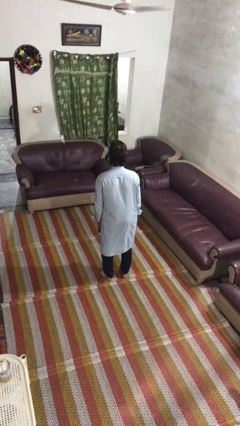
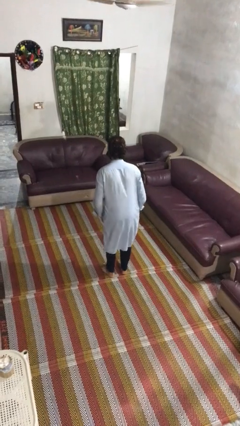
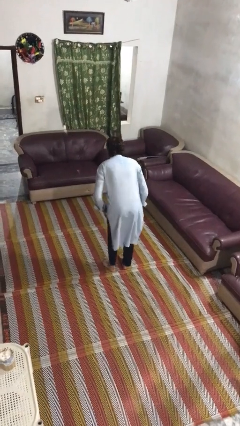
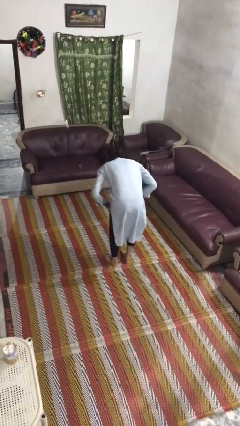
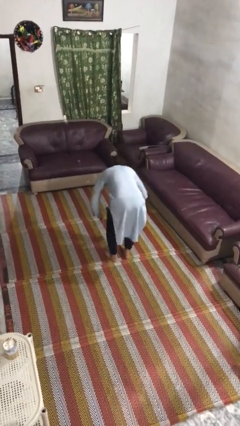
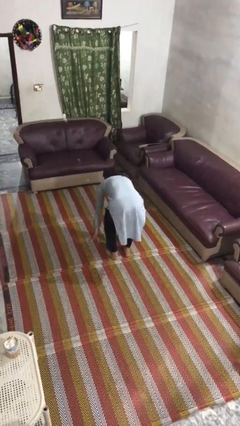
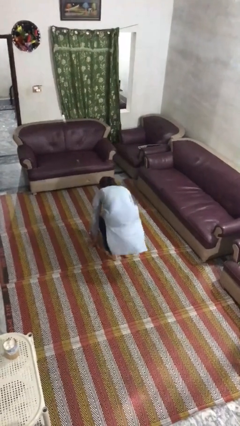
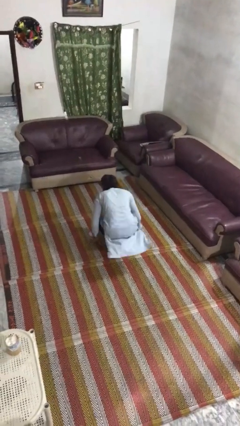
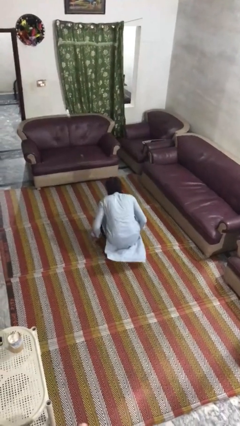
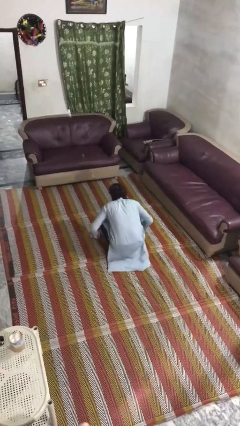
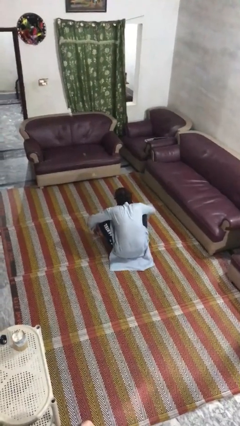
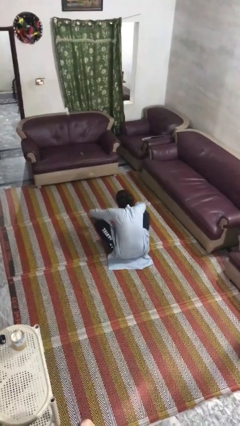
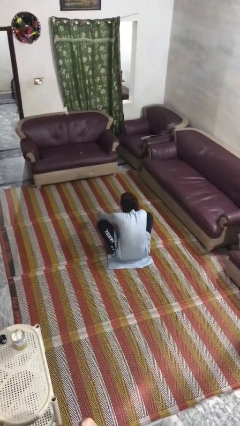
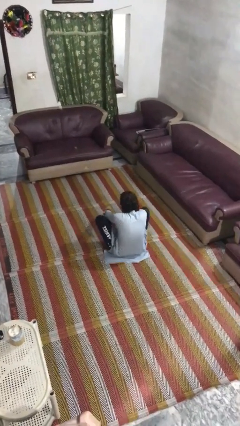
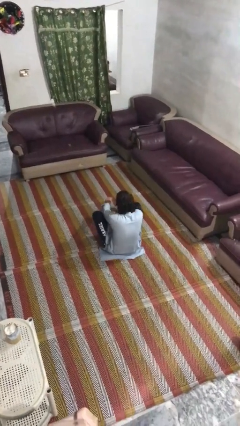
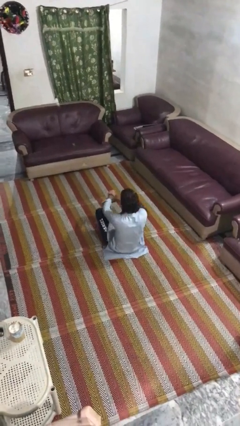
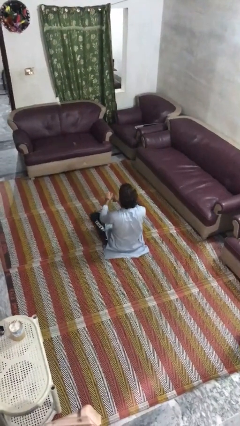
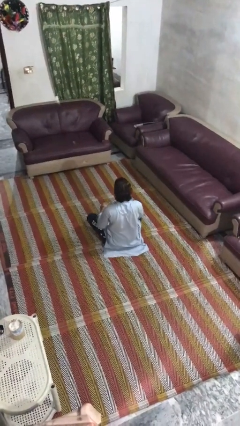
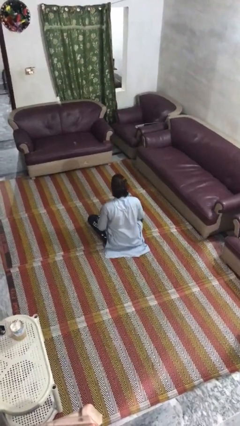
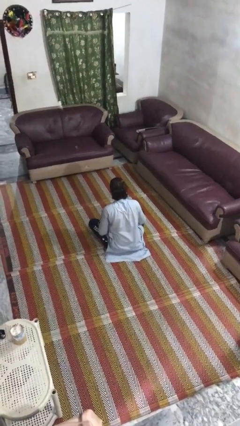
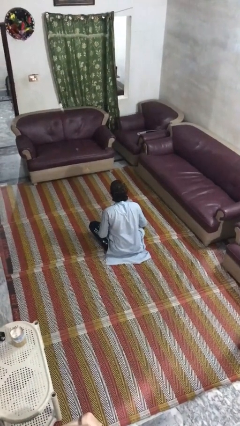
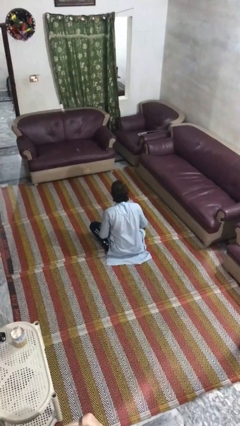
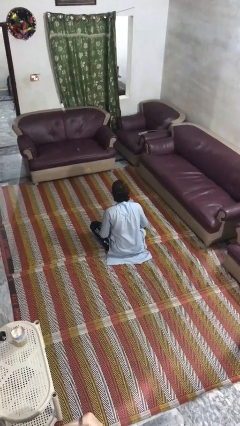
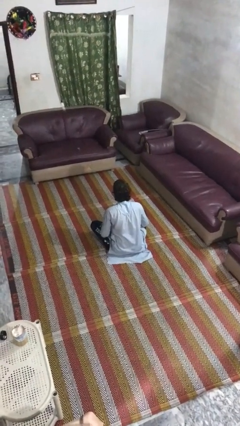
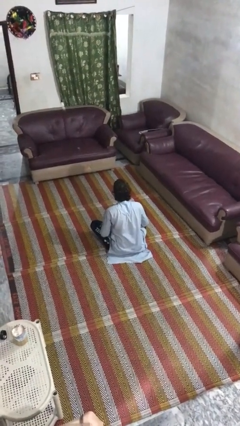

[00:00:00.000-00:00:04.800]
person sits crisscross

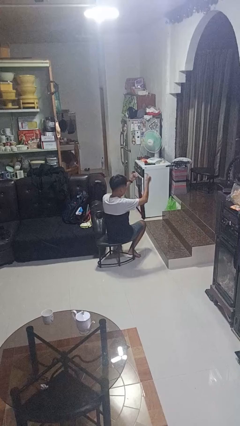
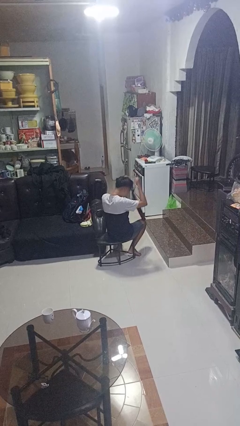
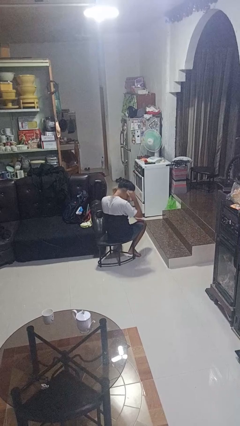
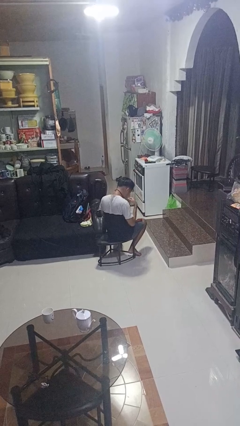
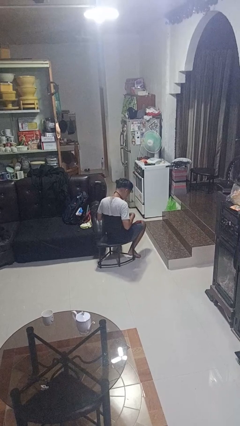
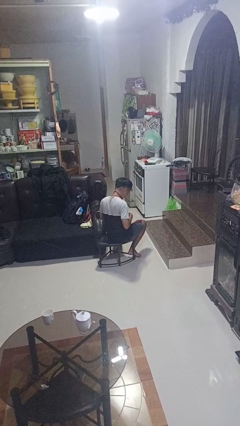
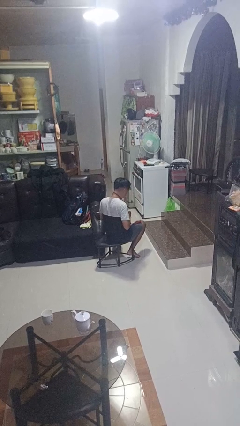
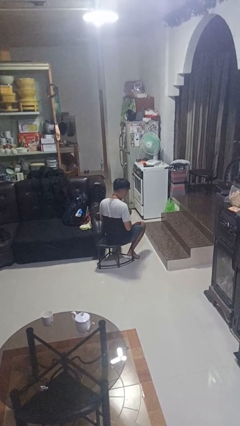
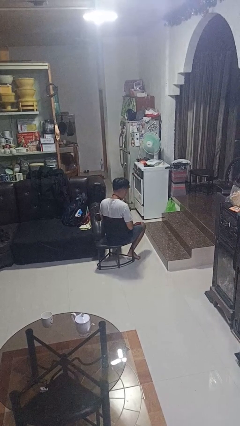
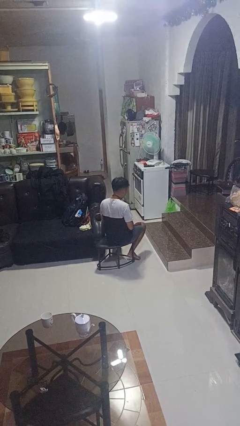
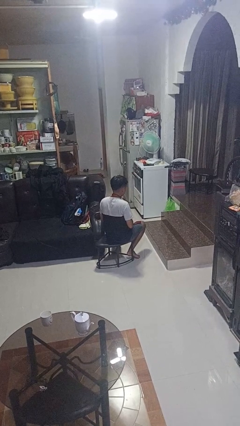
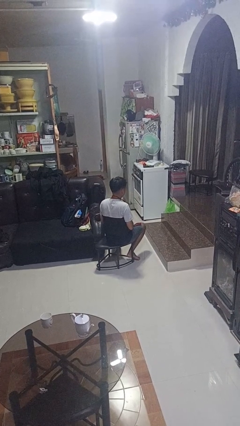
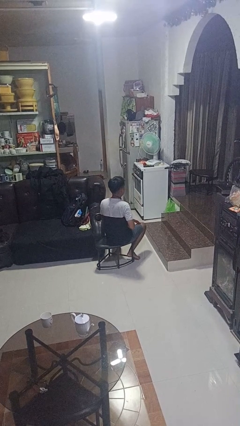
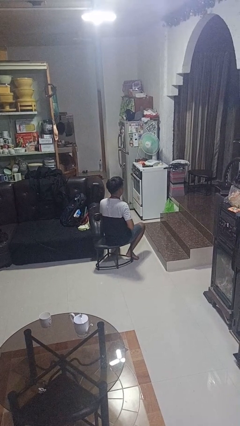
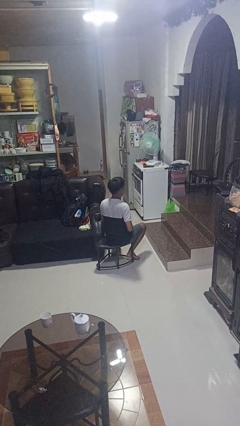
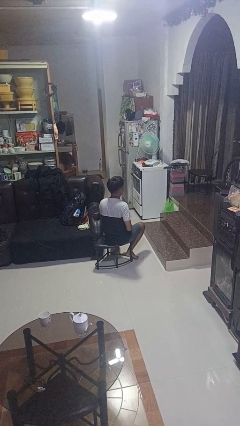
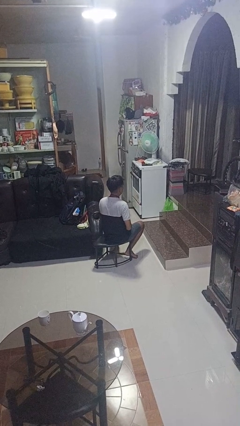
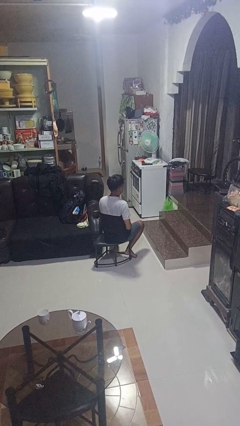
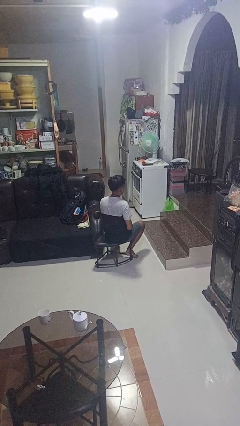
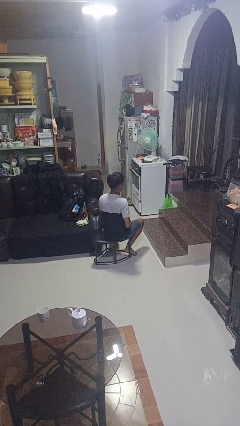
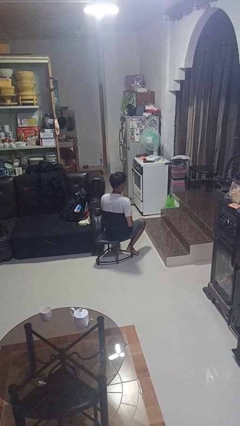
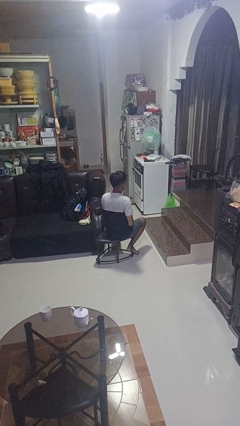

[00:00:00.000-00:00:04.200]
person puts on necktie

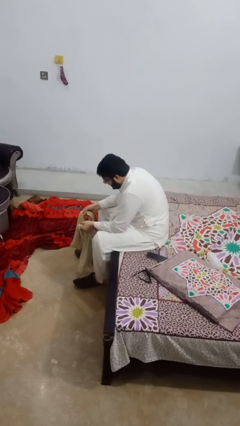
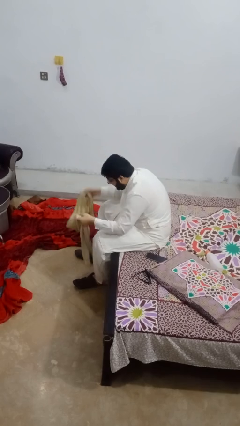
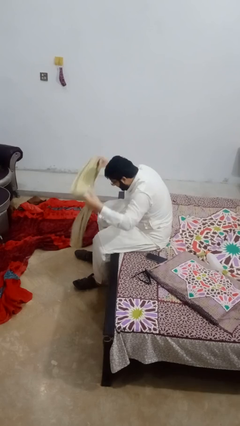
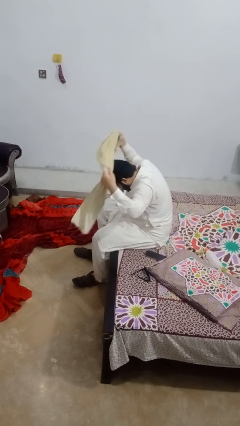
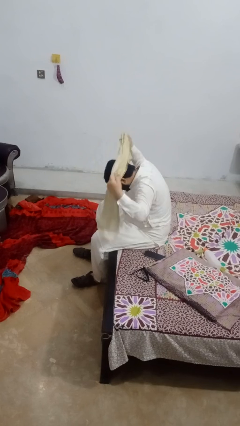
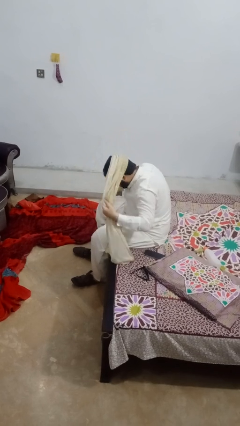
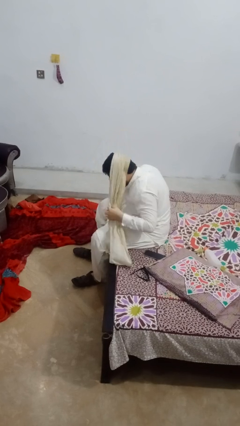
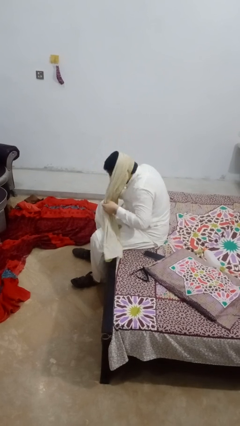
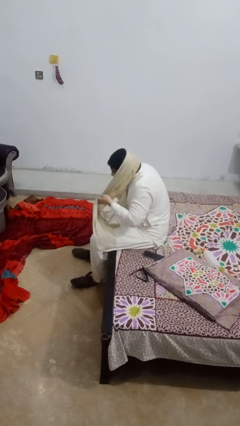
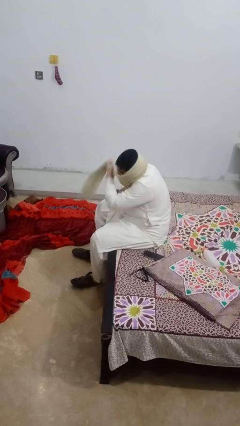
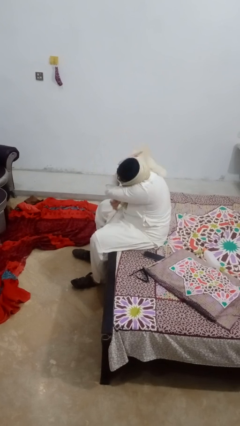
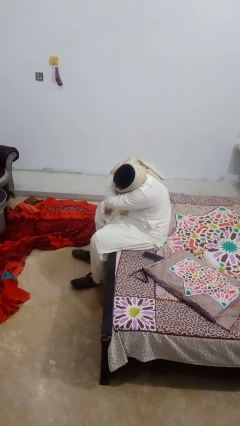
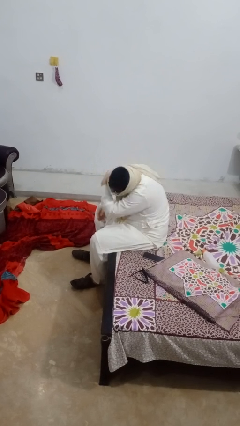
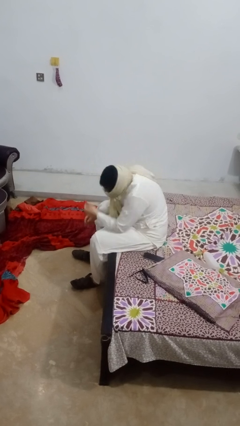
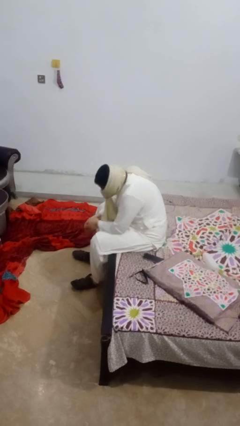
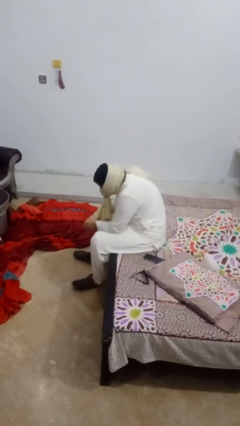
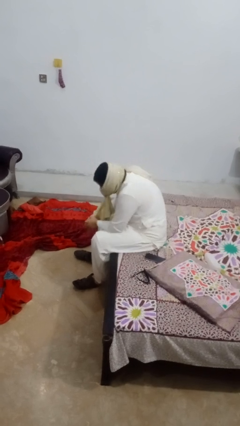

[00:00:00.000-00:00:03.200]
person puts on scarf

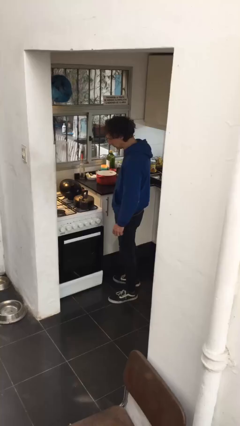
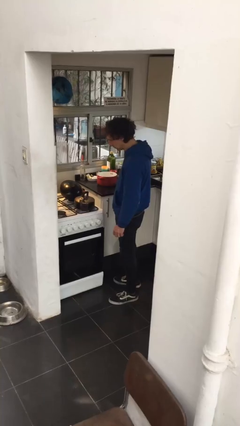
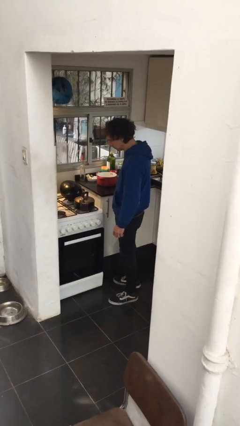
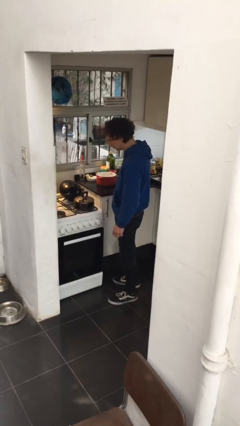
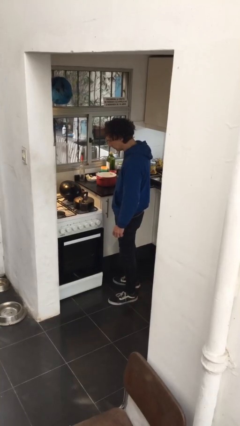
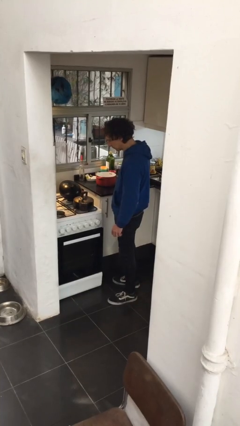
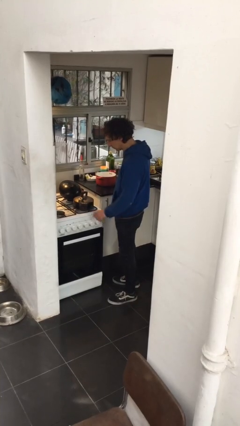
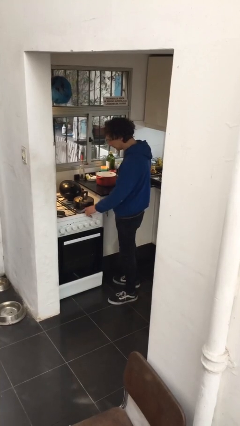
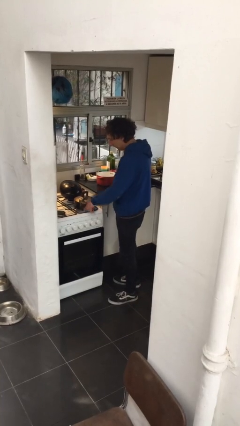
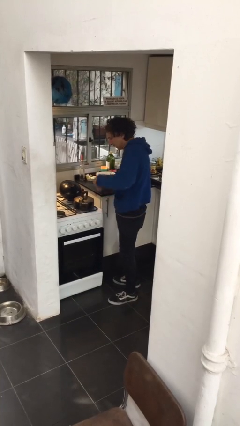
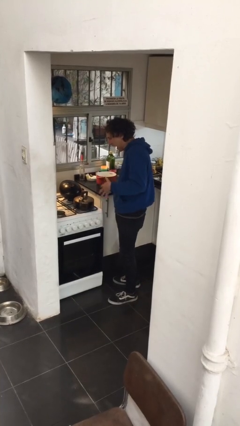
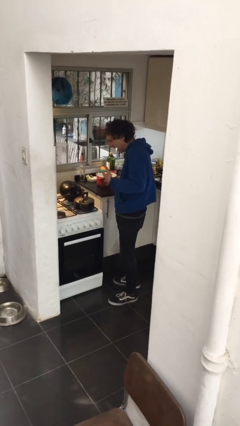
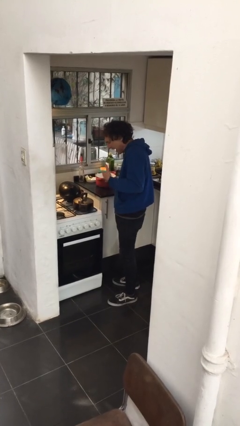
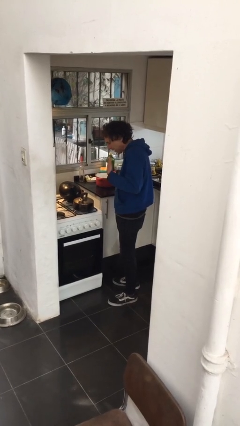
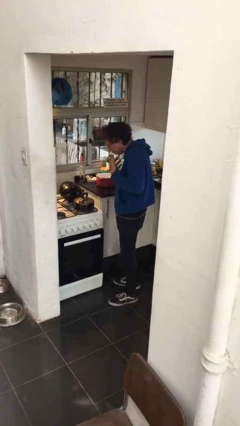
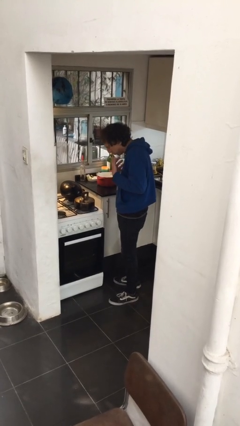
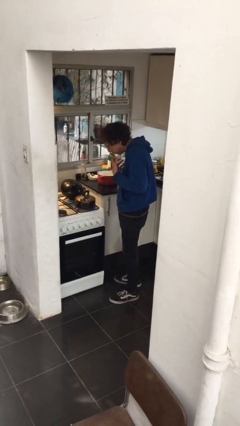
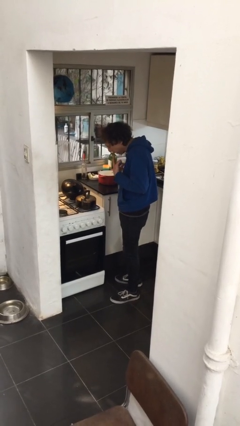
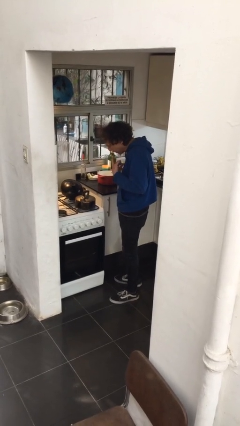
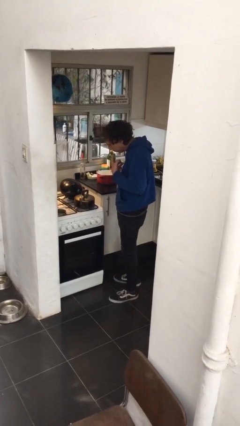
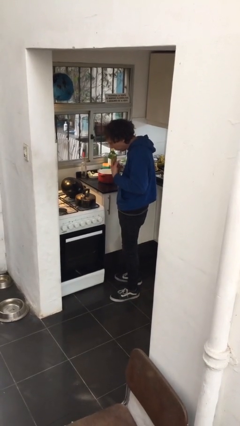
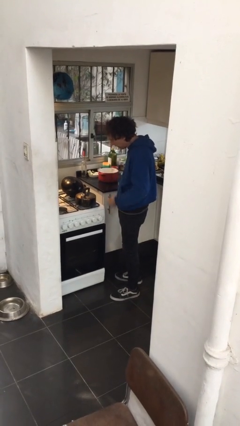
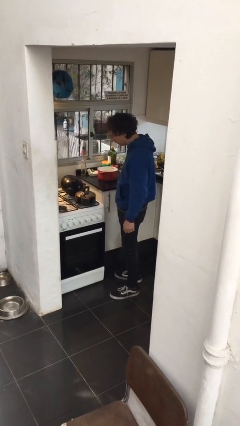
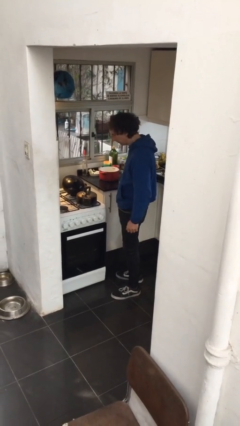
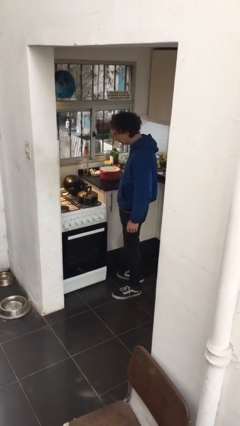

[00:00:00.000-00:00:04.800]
person burns hand

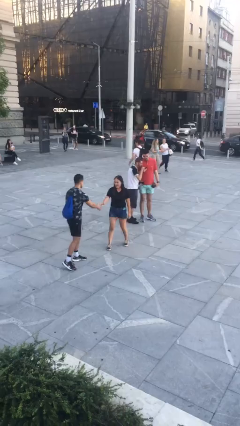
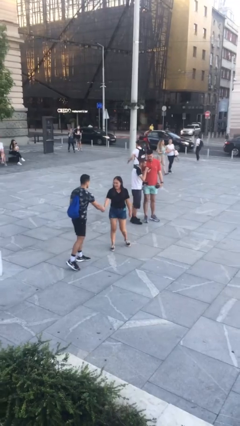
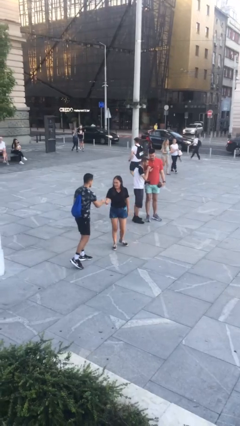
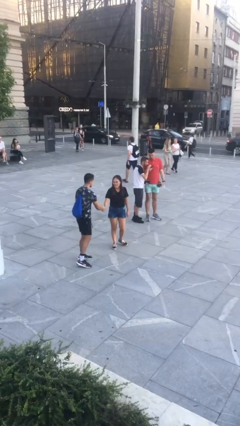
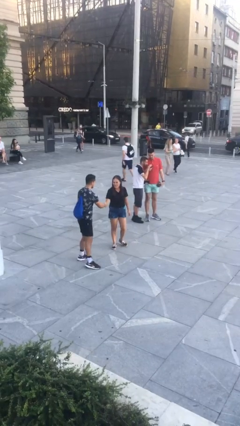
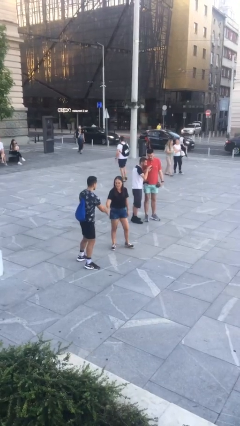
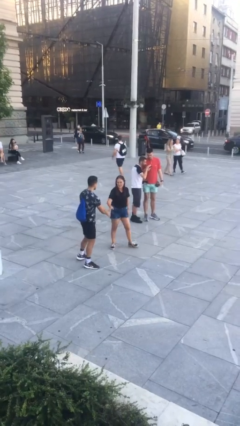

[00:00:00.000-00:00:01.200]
person shakes hand
